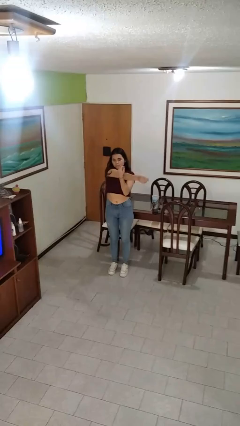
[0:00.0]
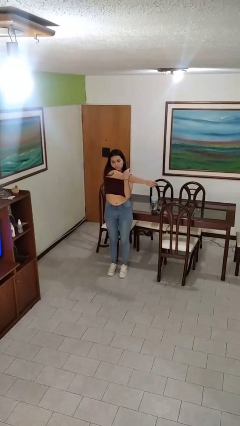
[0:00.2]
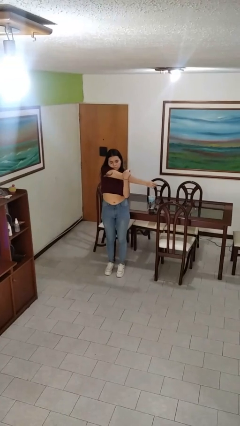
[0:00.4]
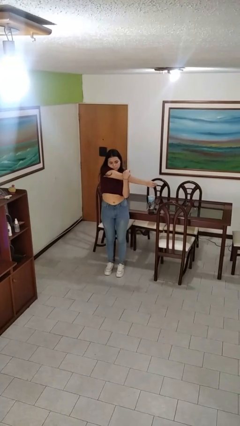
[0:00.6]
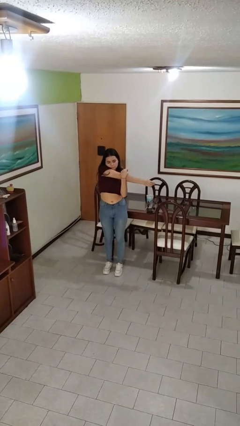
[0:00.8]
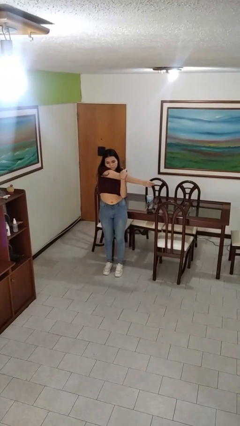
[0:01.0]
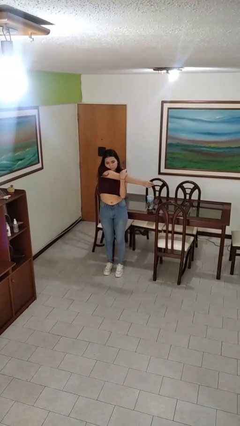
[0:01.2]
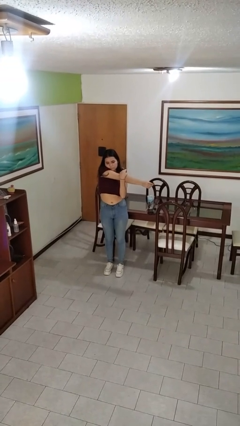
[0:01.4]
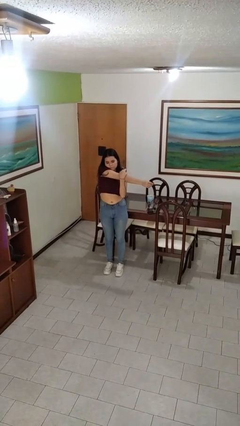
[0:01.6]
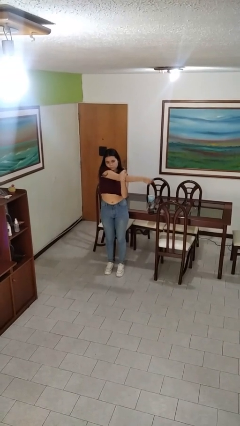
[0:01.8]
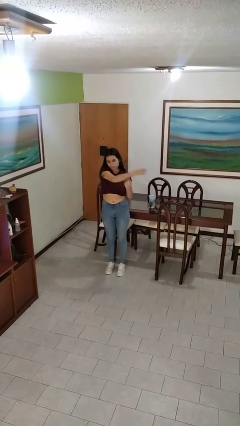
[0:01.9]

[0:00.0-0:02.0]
person stretches arms to side

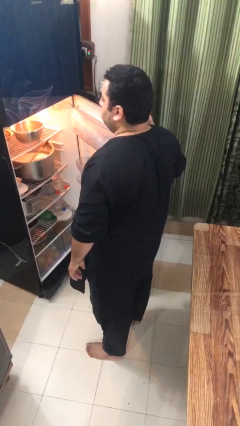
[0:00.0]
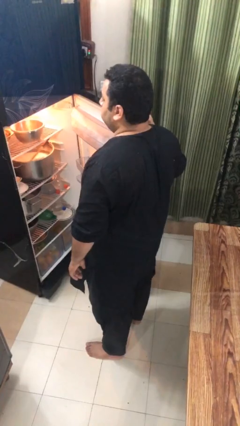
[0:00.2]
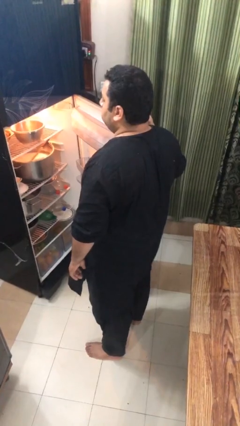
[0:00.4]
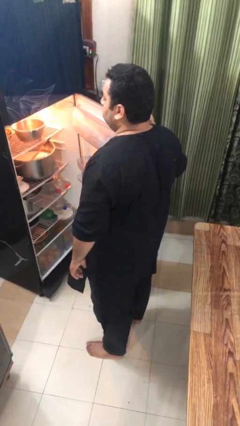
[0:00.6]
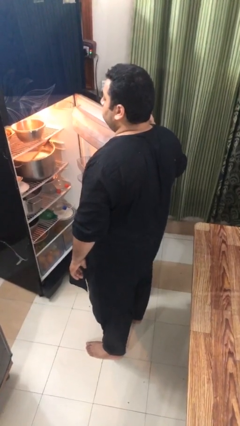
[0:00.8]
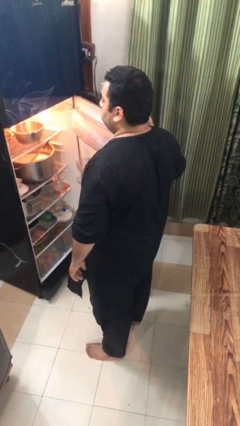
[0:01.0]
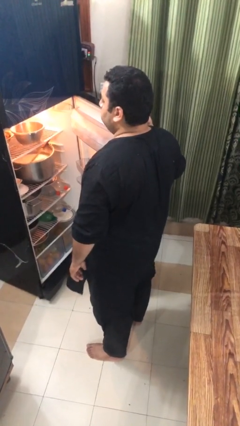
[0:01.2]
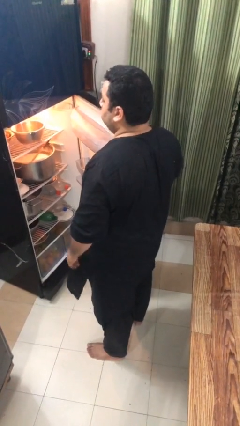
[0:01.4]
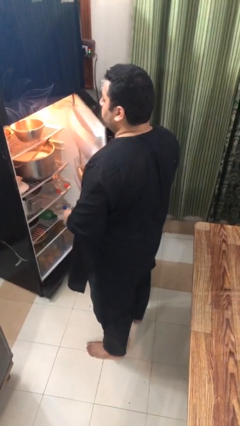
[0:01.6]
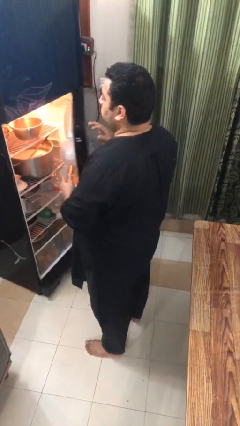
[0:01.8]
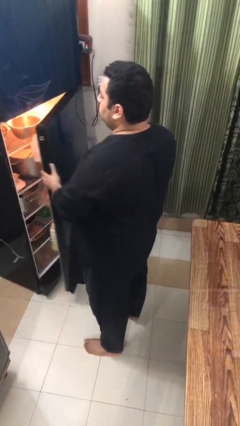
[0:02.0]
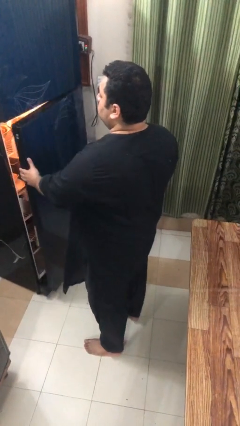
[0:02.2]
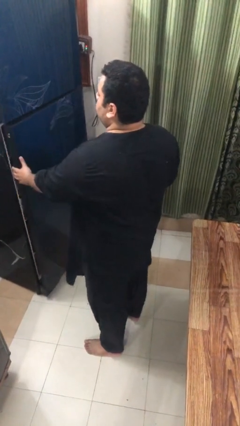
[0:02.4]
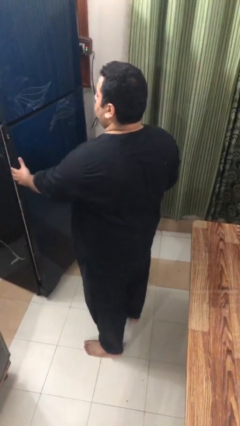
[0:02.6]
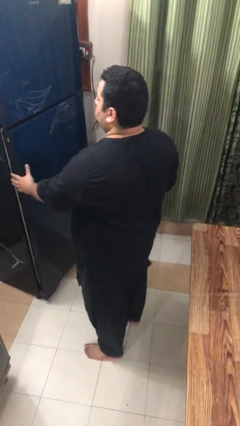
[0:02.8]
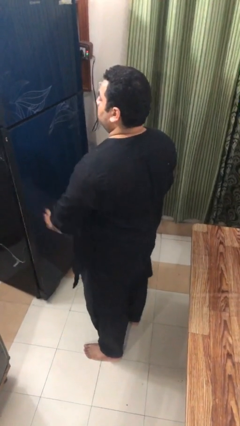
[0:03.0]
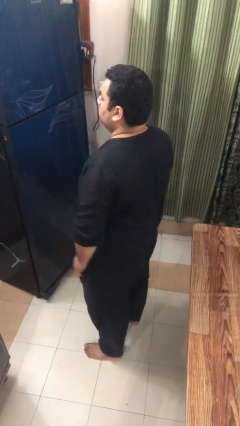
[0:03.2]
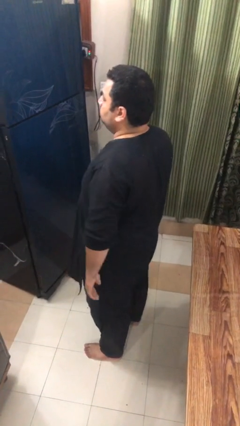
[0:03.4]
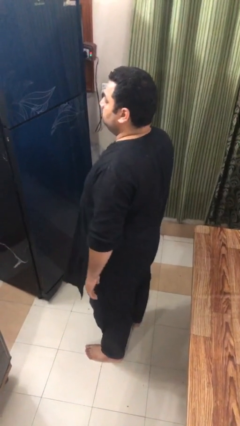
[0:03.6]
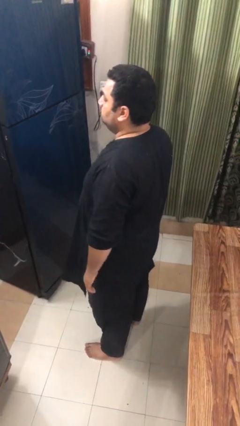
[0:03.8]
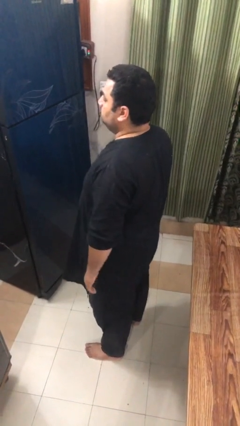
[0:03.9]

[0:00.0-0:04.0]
person closes refrigerator

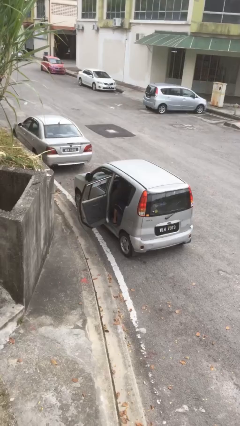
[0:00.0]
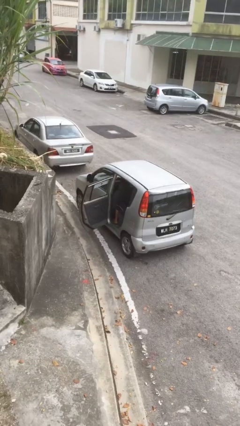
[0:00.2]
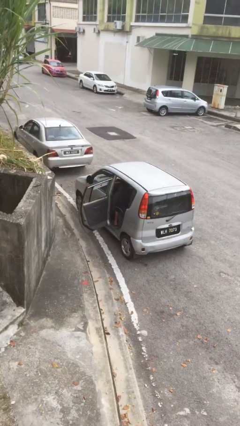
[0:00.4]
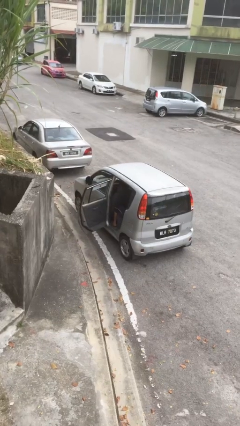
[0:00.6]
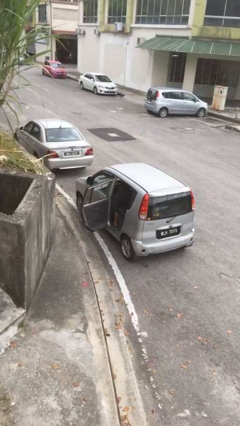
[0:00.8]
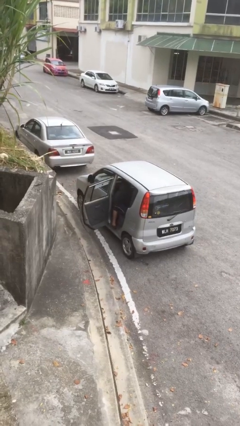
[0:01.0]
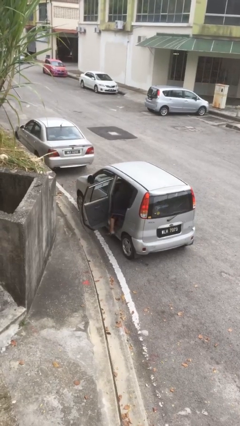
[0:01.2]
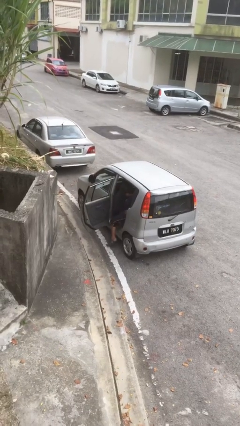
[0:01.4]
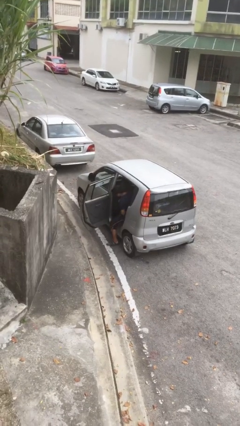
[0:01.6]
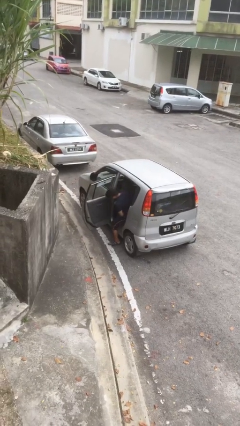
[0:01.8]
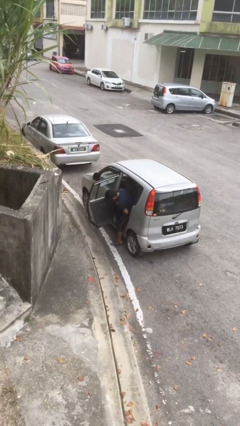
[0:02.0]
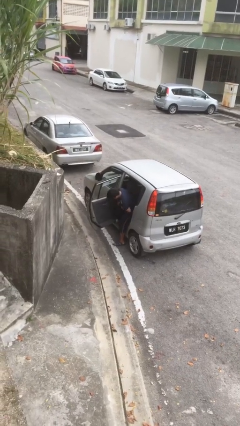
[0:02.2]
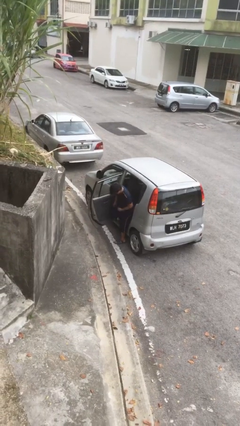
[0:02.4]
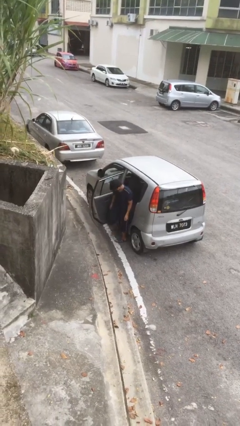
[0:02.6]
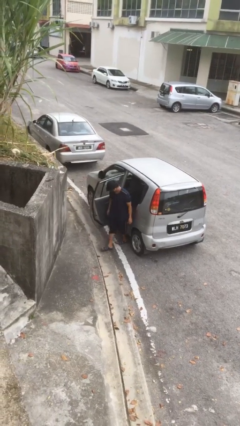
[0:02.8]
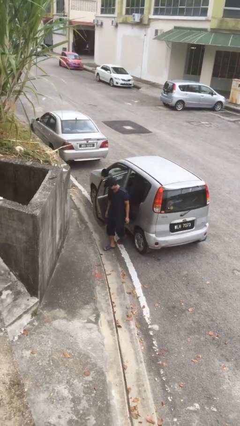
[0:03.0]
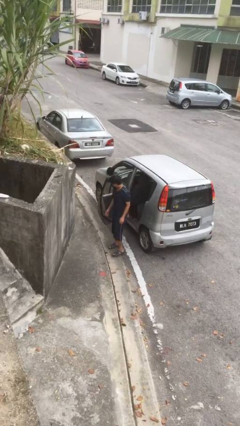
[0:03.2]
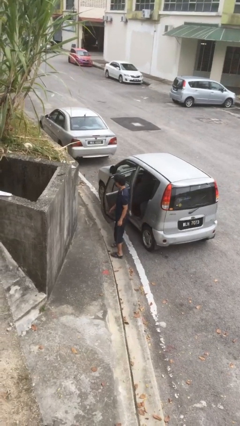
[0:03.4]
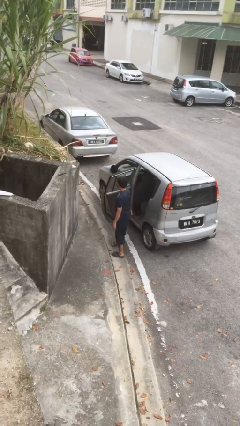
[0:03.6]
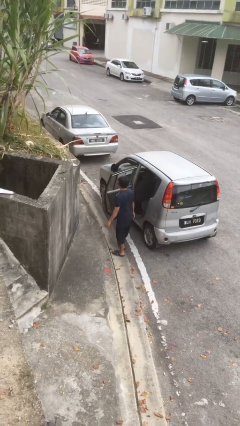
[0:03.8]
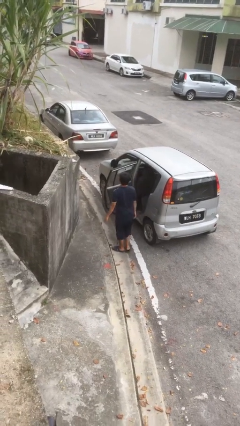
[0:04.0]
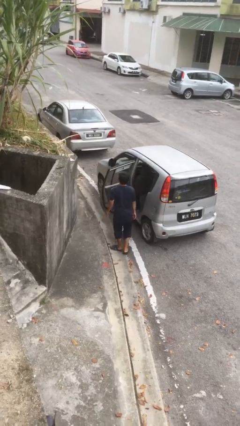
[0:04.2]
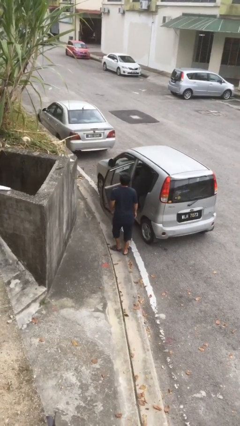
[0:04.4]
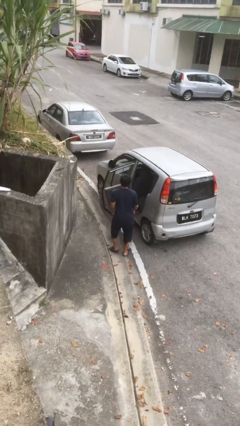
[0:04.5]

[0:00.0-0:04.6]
person exits car

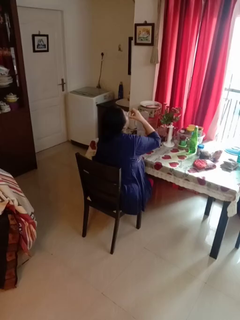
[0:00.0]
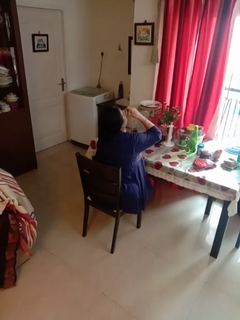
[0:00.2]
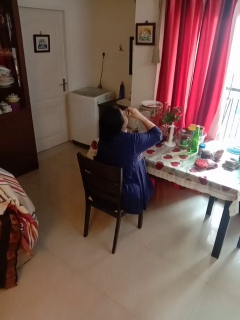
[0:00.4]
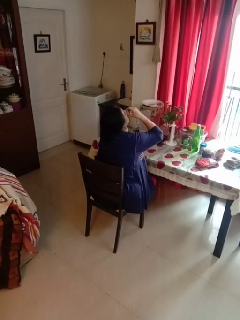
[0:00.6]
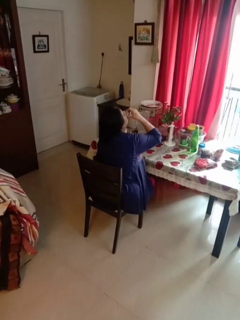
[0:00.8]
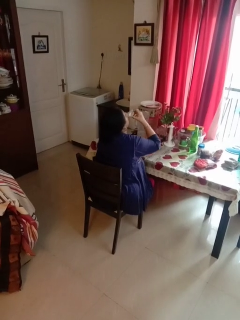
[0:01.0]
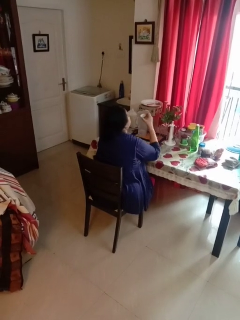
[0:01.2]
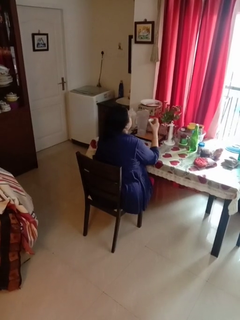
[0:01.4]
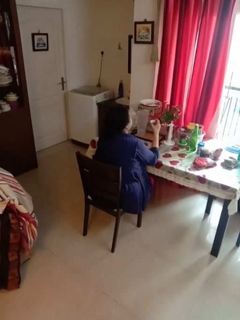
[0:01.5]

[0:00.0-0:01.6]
person drinks from shotglass

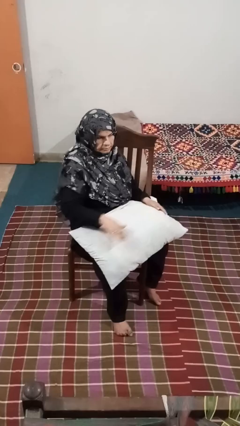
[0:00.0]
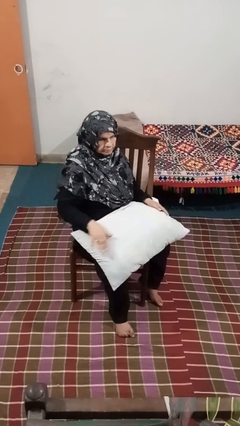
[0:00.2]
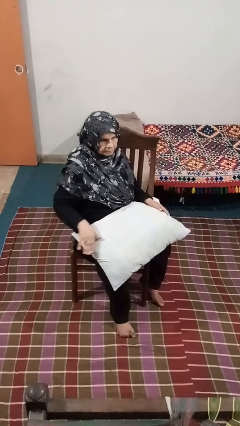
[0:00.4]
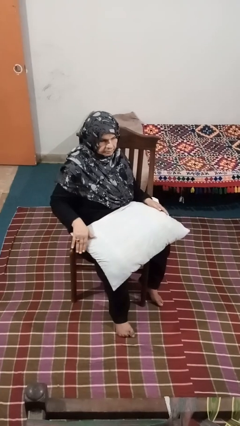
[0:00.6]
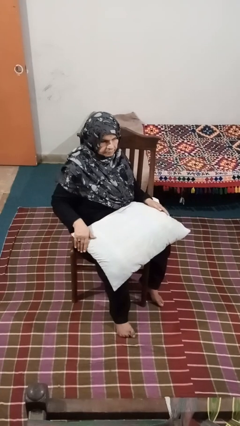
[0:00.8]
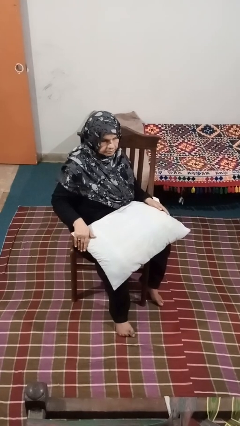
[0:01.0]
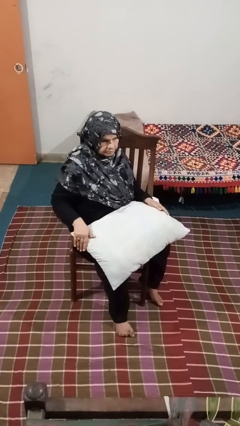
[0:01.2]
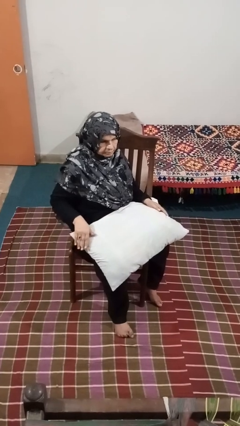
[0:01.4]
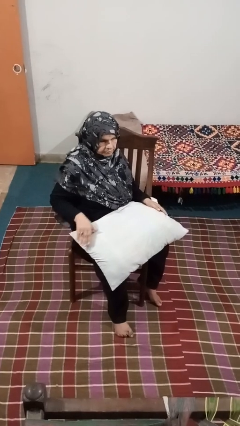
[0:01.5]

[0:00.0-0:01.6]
person waves hand over object

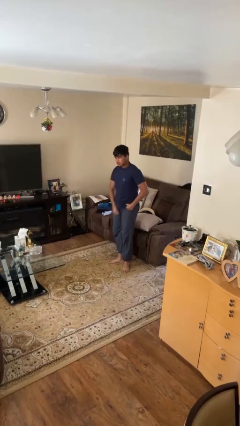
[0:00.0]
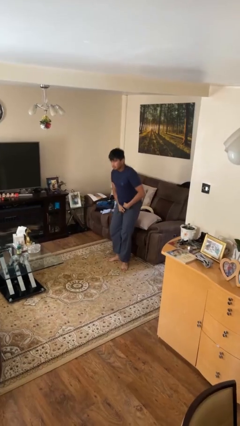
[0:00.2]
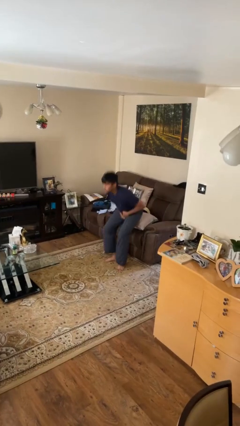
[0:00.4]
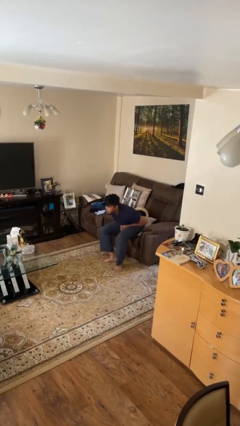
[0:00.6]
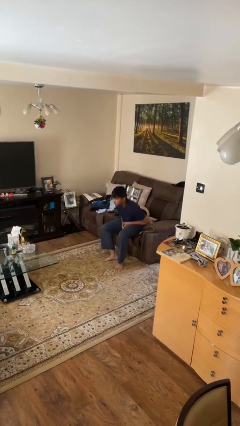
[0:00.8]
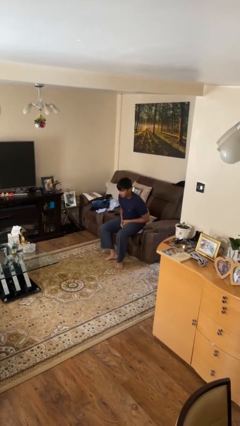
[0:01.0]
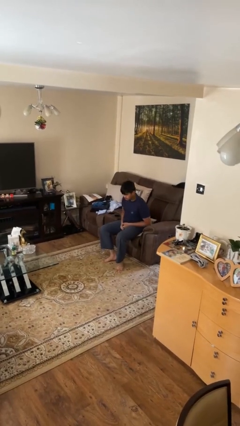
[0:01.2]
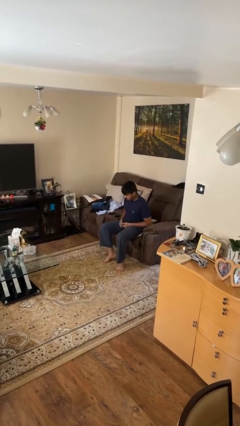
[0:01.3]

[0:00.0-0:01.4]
person sits down

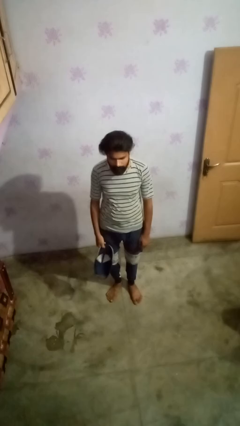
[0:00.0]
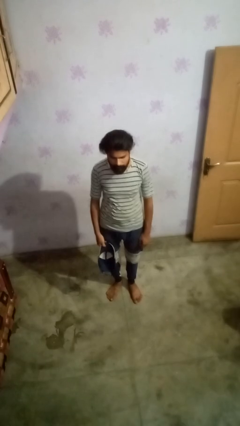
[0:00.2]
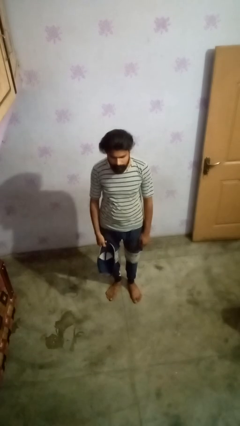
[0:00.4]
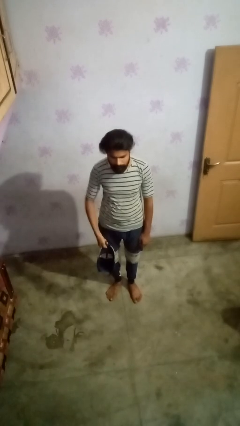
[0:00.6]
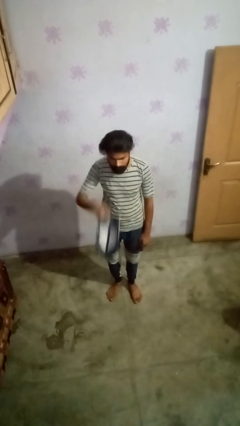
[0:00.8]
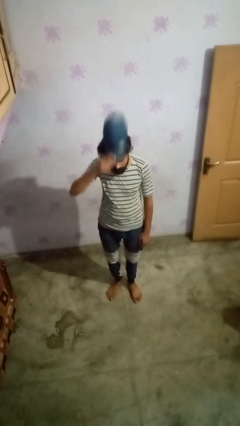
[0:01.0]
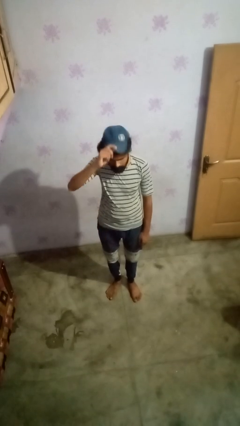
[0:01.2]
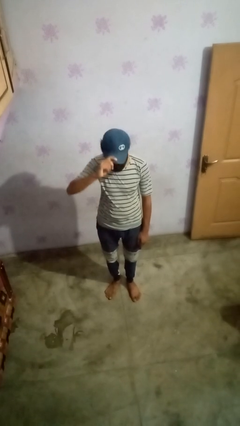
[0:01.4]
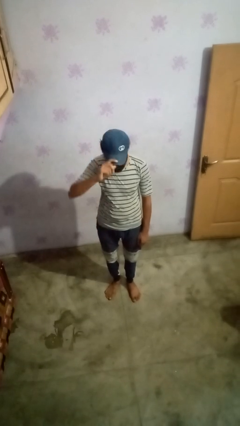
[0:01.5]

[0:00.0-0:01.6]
person puts on hat

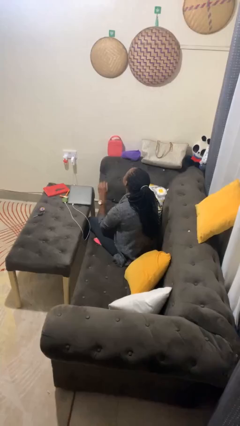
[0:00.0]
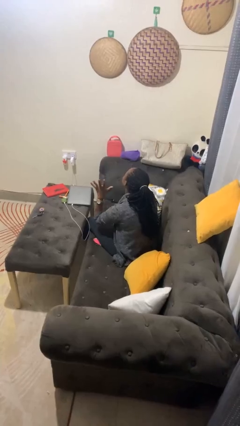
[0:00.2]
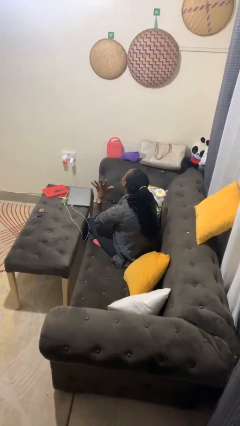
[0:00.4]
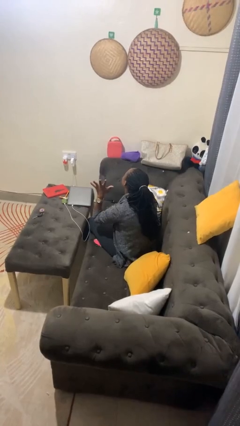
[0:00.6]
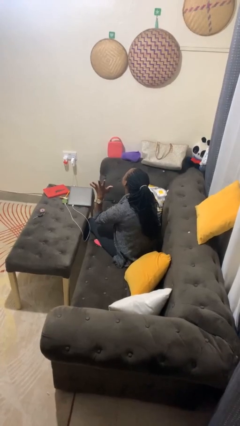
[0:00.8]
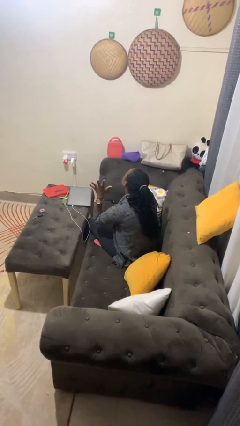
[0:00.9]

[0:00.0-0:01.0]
person gestures number five
